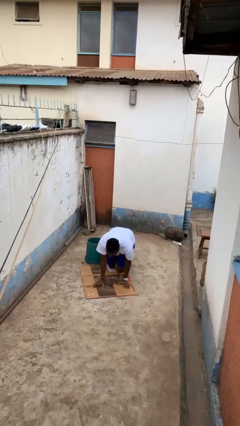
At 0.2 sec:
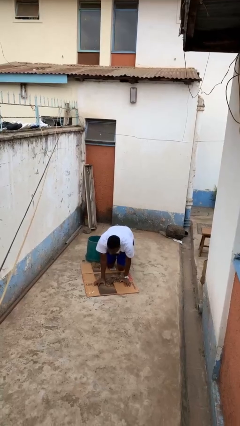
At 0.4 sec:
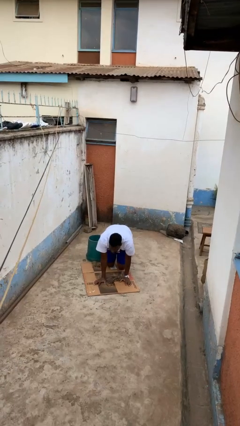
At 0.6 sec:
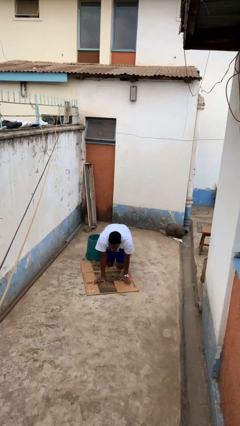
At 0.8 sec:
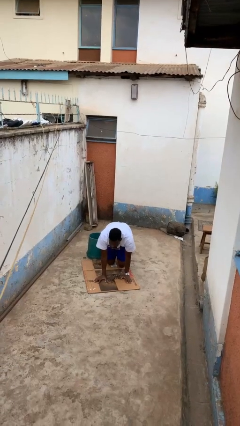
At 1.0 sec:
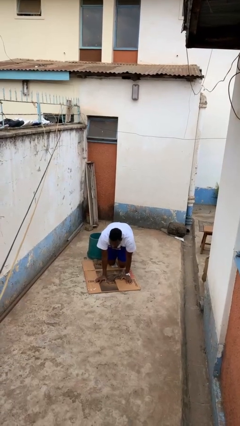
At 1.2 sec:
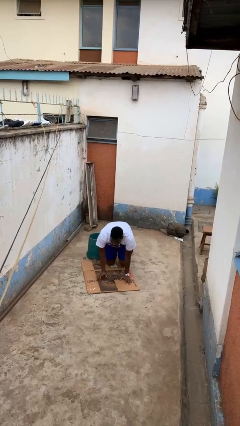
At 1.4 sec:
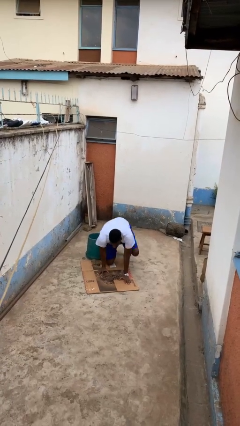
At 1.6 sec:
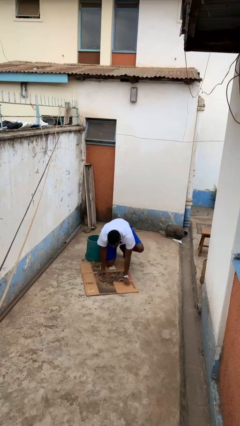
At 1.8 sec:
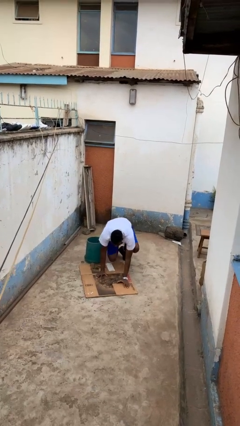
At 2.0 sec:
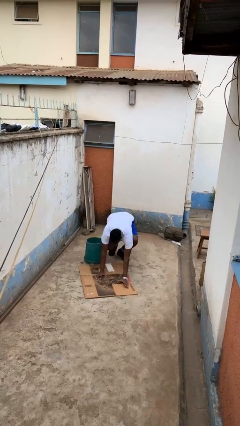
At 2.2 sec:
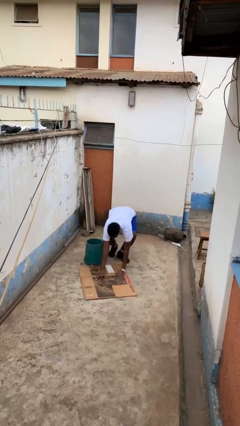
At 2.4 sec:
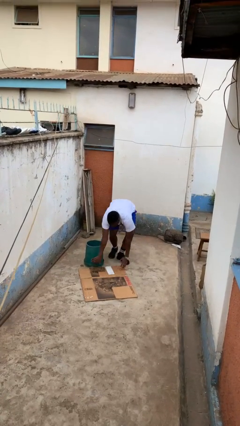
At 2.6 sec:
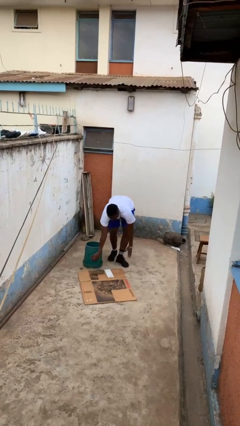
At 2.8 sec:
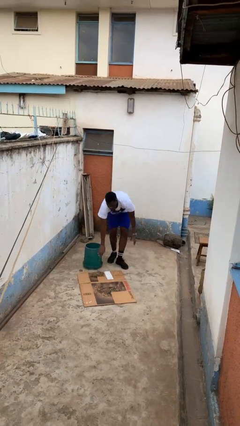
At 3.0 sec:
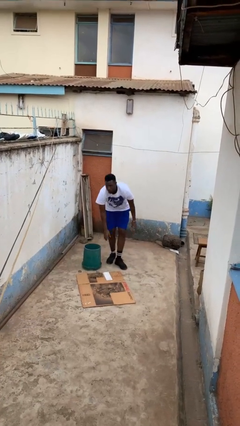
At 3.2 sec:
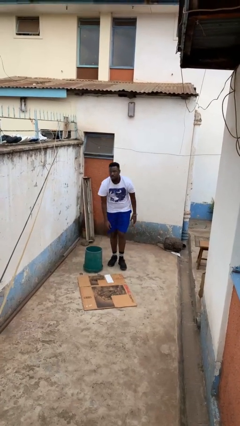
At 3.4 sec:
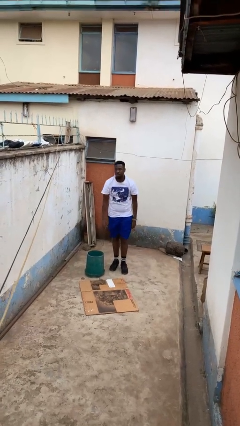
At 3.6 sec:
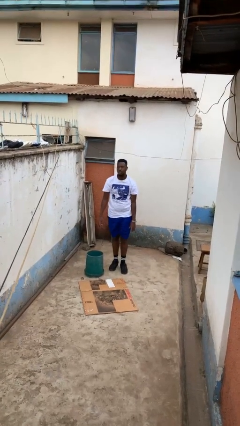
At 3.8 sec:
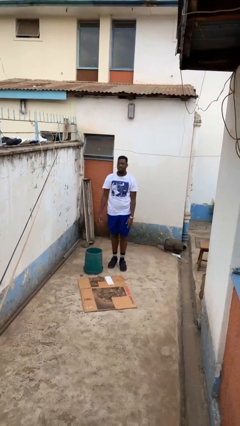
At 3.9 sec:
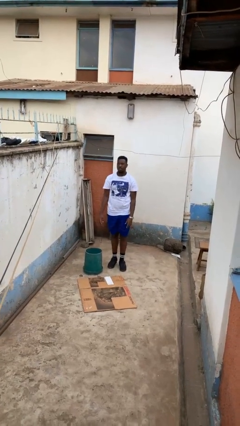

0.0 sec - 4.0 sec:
person stands up from floor

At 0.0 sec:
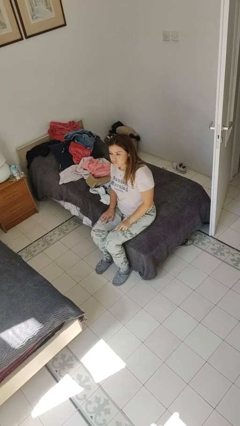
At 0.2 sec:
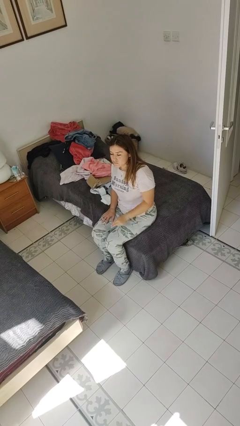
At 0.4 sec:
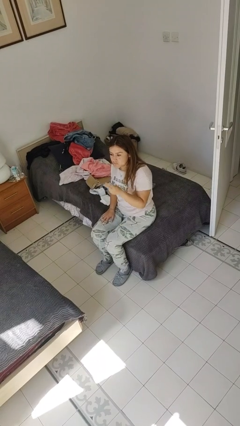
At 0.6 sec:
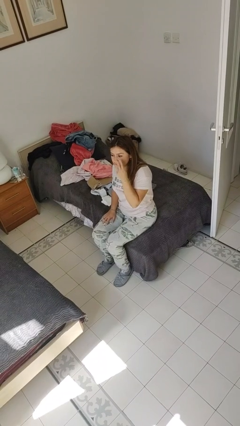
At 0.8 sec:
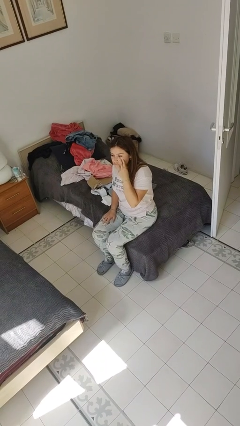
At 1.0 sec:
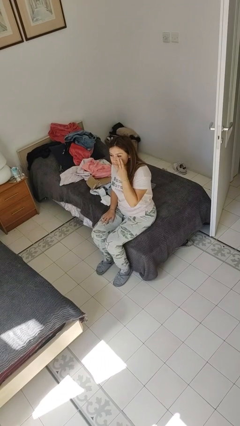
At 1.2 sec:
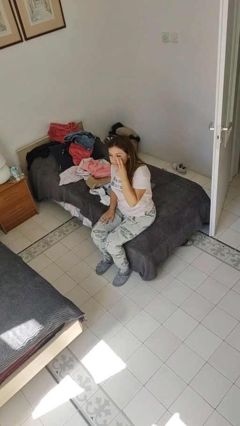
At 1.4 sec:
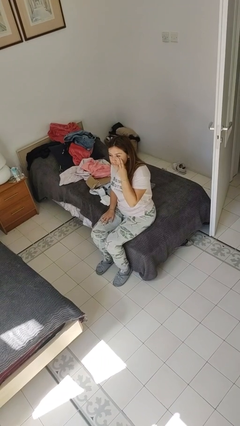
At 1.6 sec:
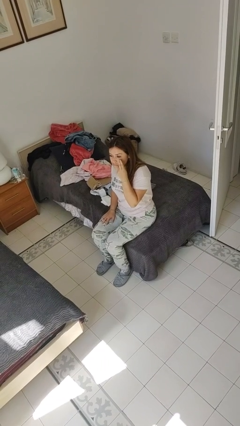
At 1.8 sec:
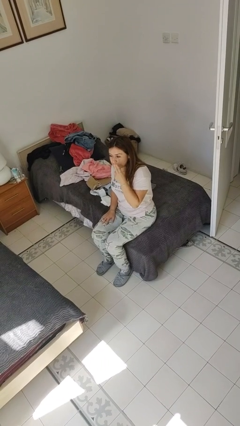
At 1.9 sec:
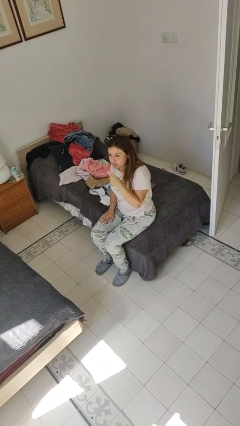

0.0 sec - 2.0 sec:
person gestures watch closely

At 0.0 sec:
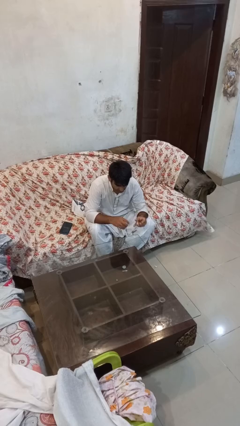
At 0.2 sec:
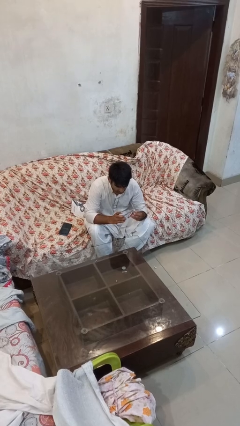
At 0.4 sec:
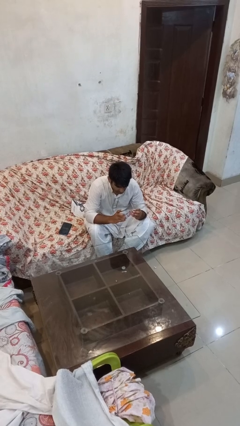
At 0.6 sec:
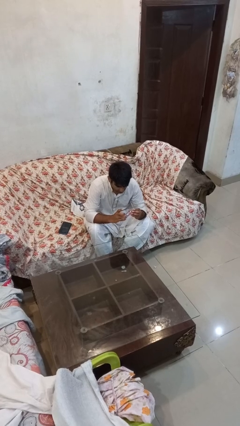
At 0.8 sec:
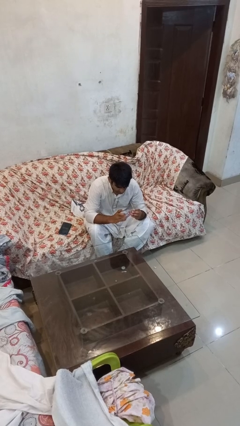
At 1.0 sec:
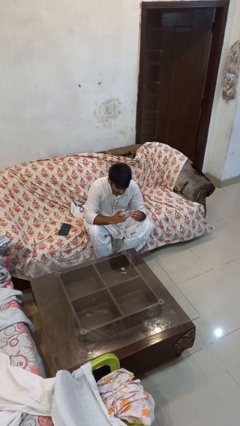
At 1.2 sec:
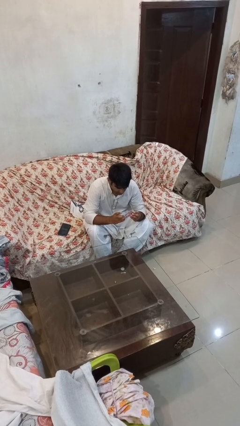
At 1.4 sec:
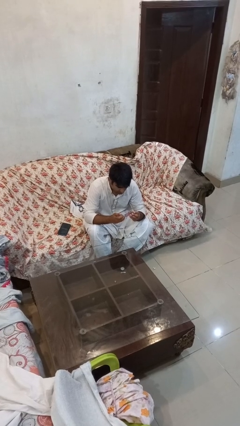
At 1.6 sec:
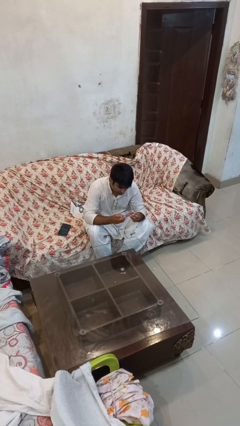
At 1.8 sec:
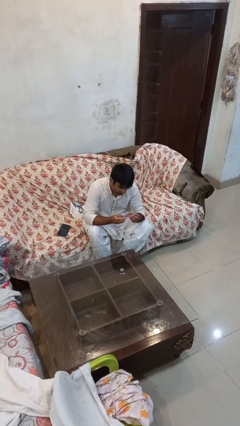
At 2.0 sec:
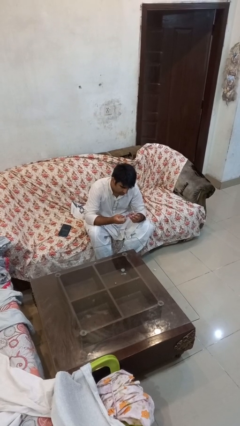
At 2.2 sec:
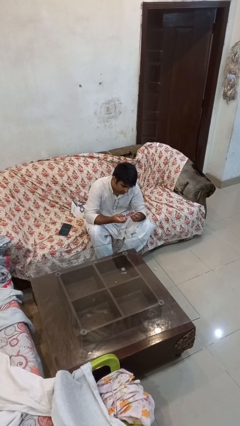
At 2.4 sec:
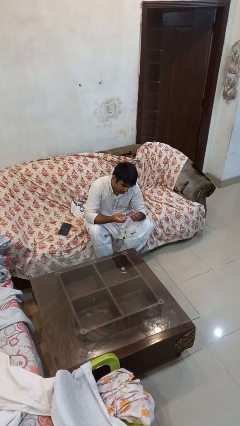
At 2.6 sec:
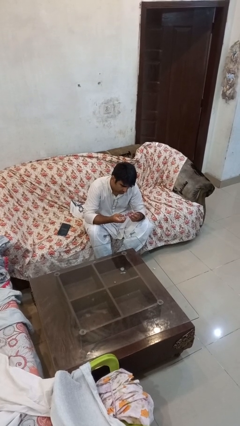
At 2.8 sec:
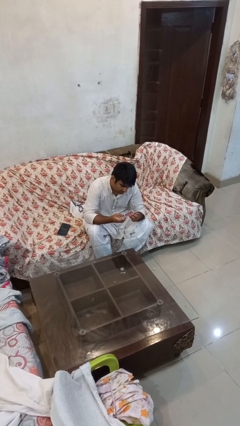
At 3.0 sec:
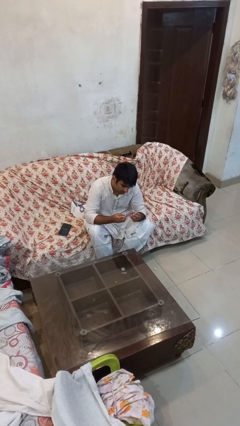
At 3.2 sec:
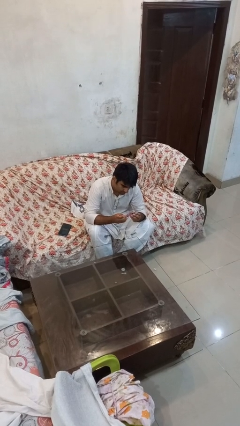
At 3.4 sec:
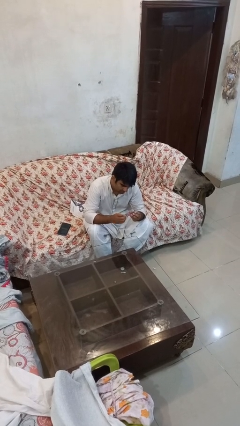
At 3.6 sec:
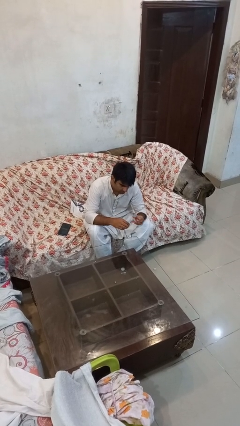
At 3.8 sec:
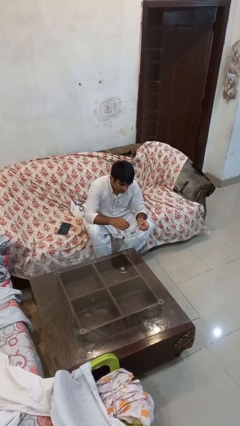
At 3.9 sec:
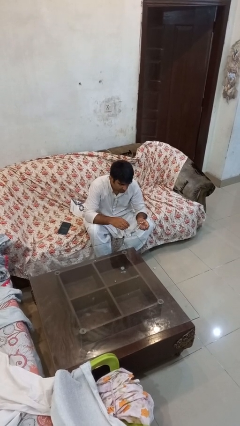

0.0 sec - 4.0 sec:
person clips fingernails

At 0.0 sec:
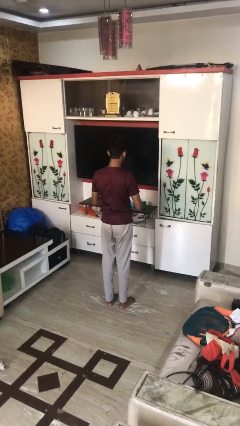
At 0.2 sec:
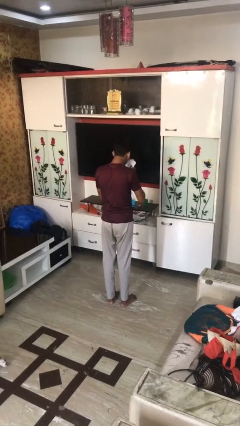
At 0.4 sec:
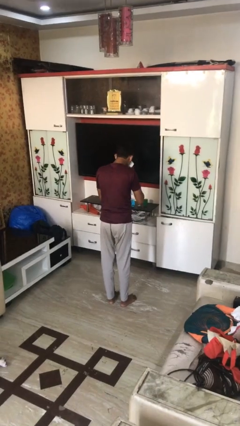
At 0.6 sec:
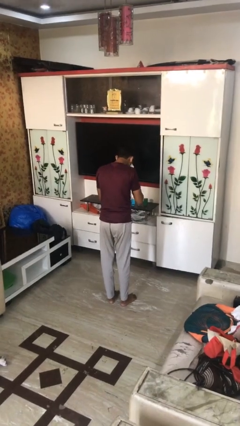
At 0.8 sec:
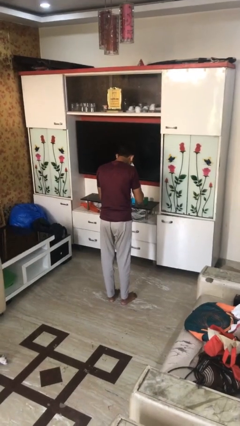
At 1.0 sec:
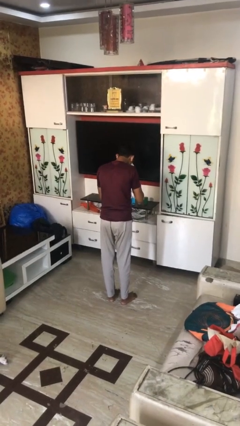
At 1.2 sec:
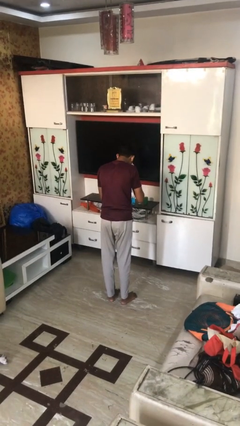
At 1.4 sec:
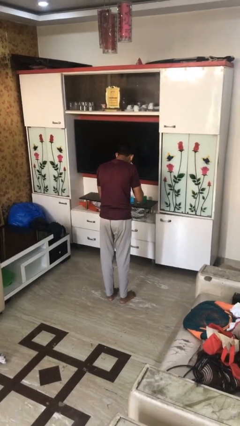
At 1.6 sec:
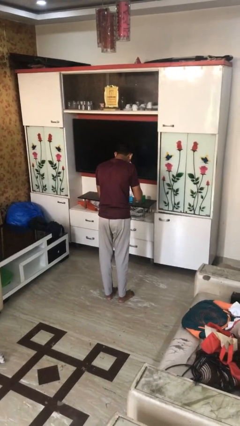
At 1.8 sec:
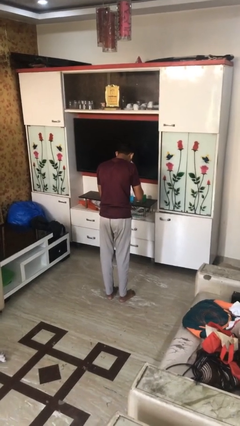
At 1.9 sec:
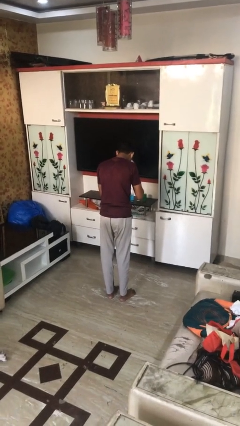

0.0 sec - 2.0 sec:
person blows nose

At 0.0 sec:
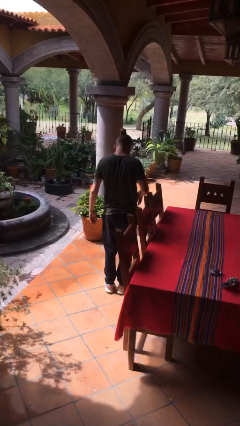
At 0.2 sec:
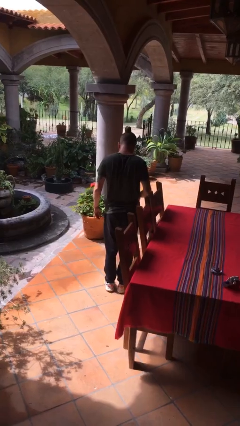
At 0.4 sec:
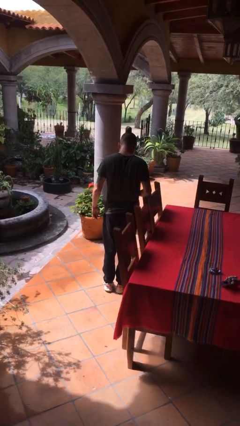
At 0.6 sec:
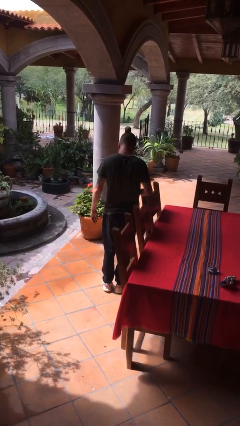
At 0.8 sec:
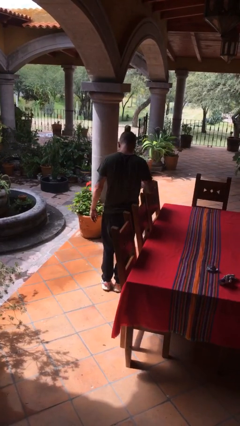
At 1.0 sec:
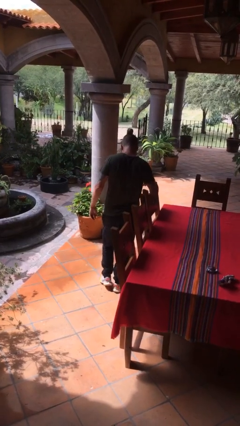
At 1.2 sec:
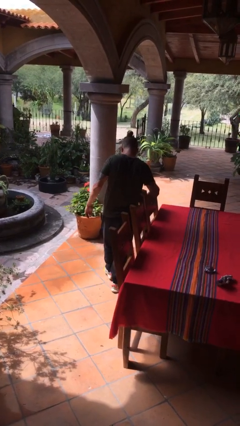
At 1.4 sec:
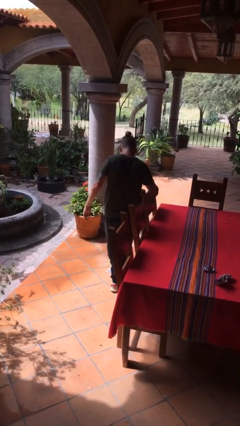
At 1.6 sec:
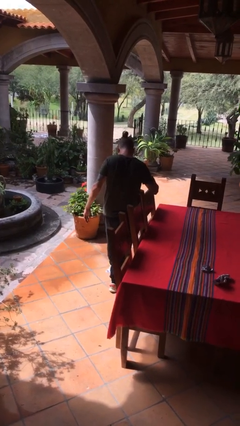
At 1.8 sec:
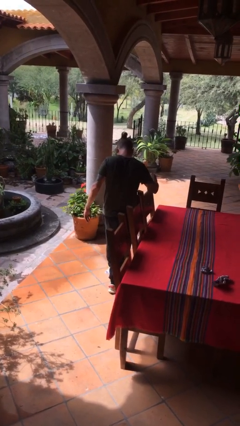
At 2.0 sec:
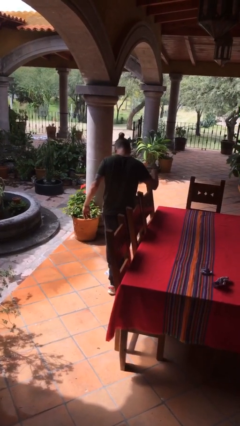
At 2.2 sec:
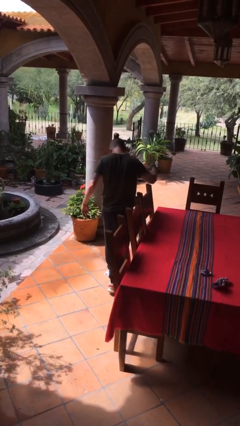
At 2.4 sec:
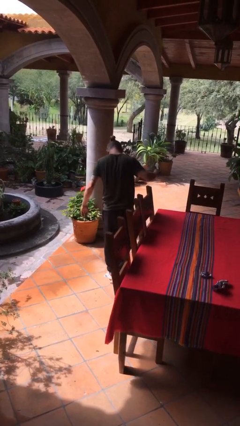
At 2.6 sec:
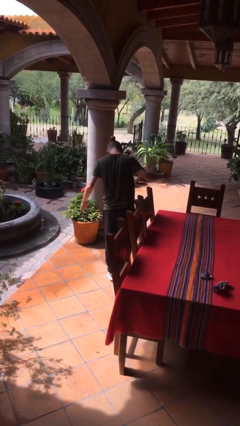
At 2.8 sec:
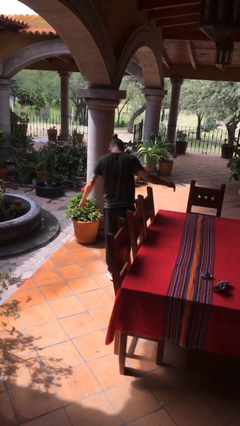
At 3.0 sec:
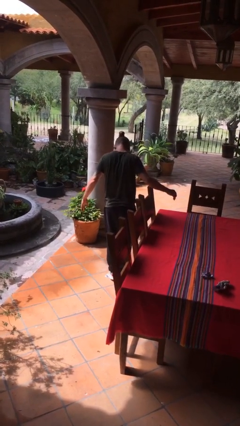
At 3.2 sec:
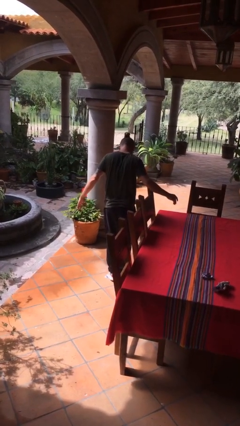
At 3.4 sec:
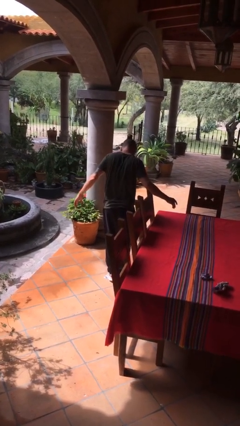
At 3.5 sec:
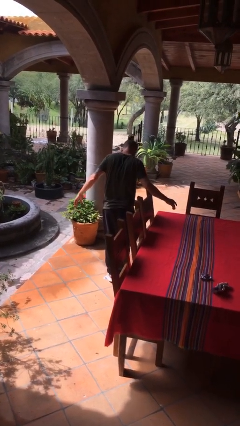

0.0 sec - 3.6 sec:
person uses bodyweight scale

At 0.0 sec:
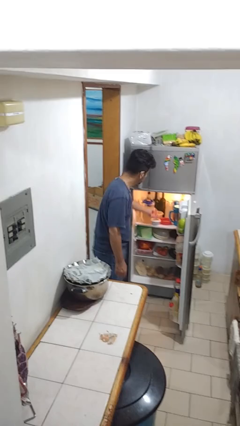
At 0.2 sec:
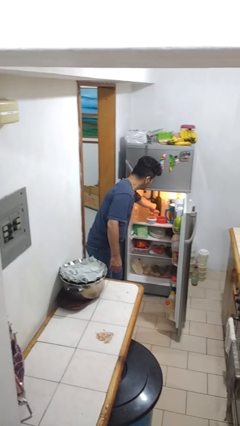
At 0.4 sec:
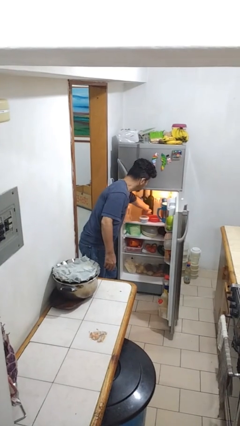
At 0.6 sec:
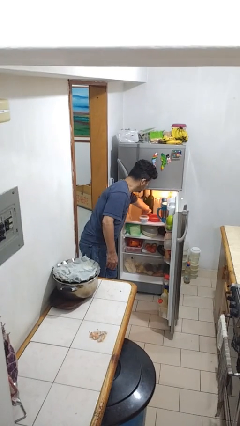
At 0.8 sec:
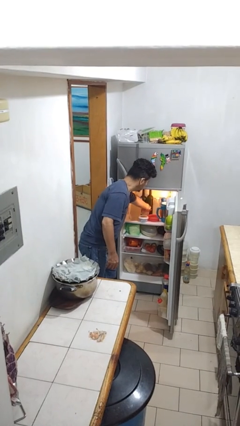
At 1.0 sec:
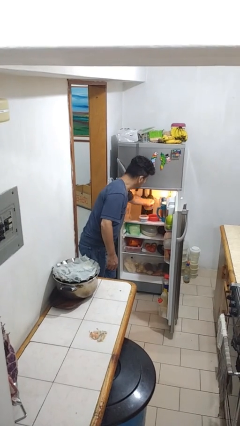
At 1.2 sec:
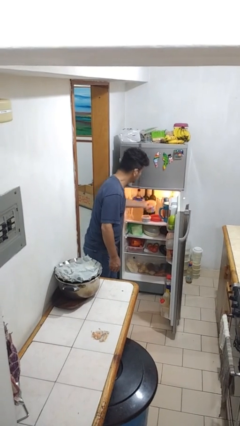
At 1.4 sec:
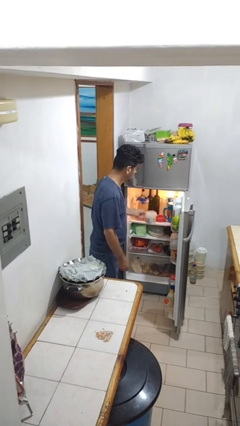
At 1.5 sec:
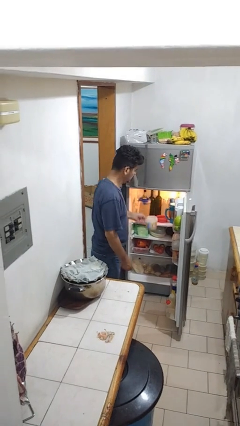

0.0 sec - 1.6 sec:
person takes object from refrigerator
